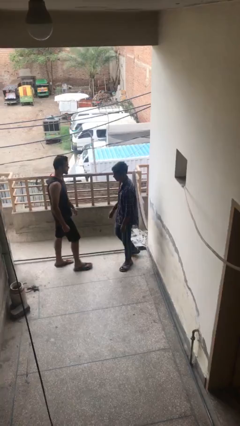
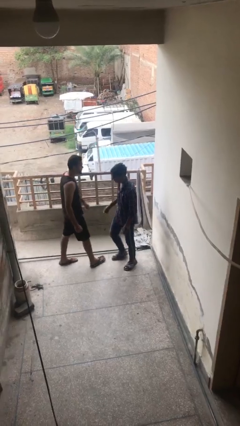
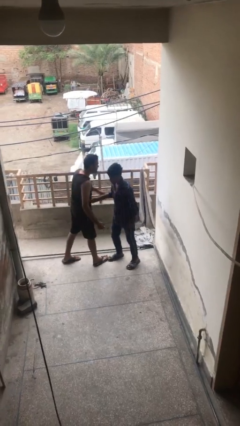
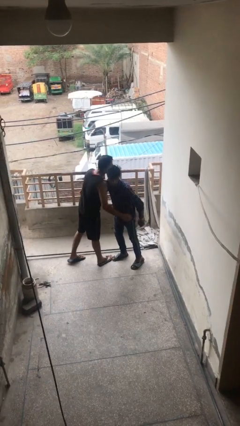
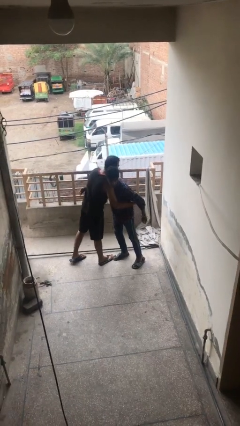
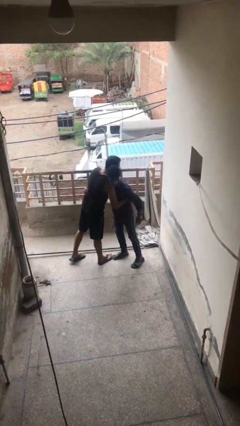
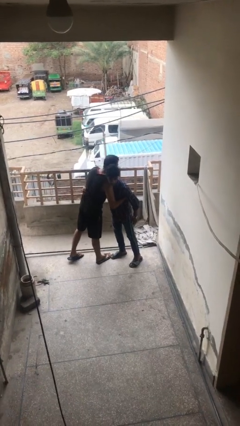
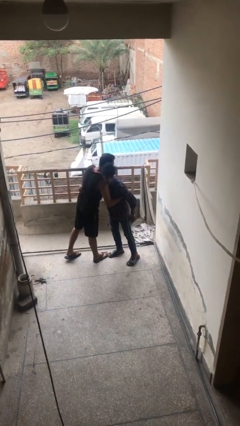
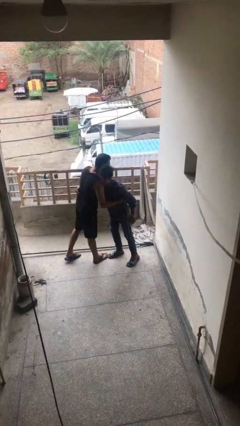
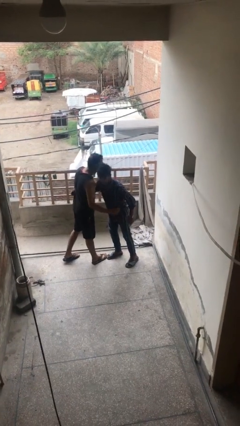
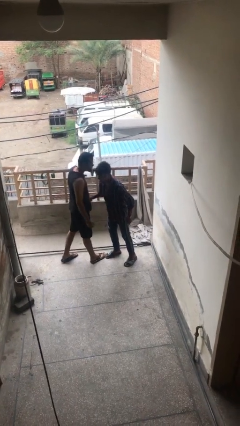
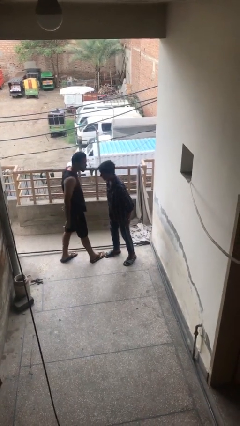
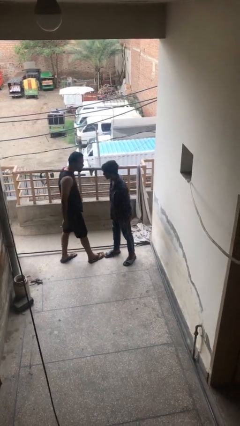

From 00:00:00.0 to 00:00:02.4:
person embraces person

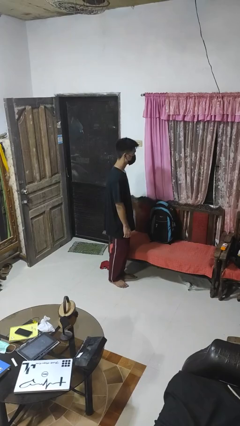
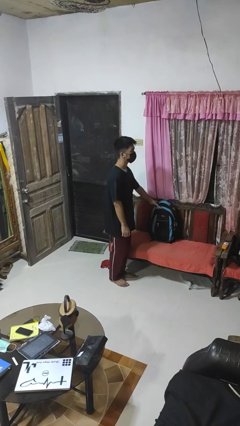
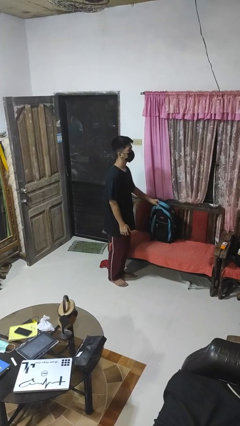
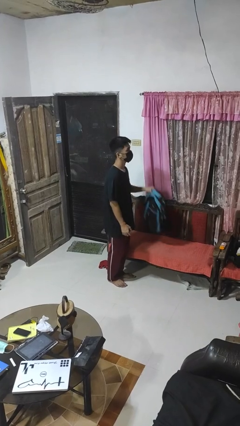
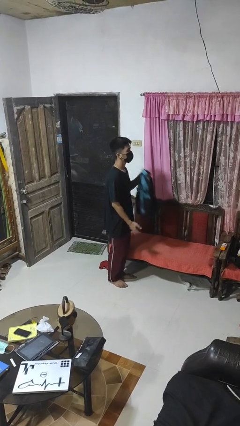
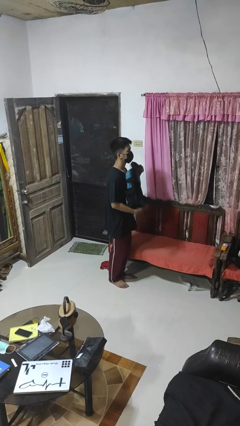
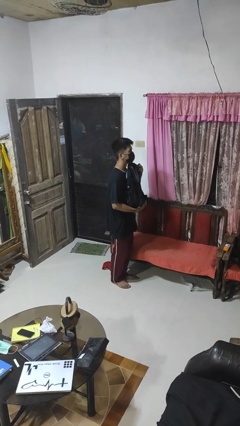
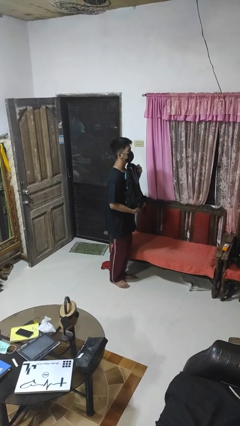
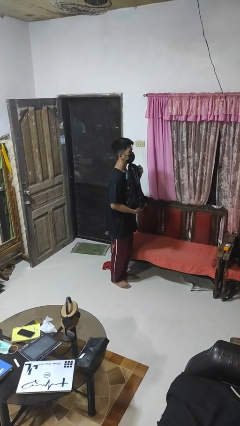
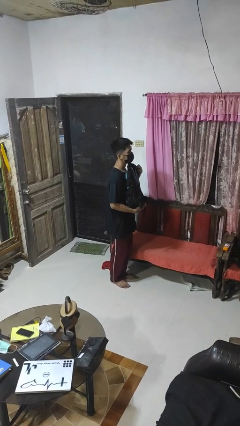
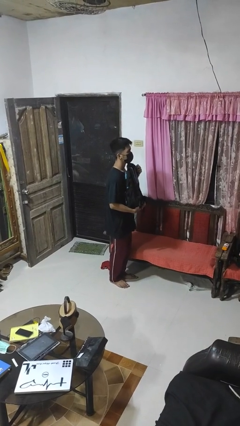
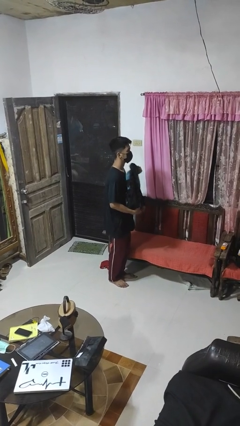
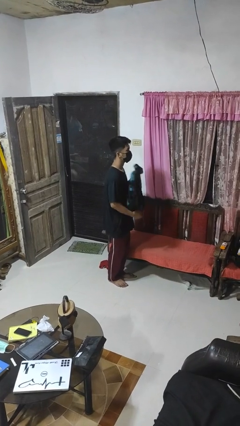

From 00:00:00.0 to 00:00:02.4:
person picks up object from couch

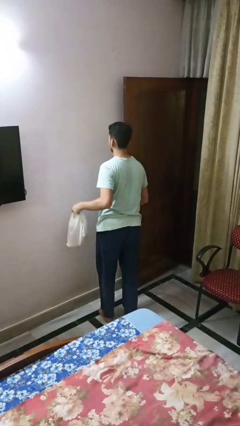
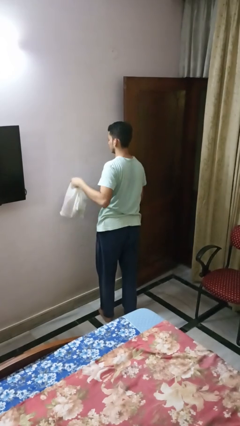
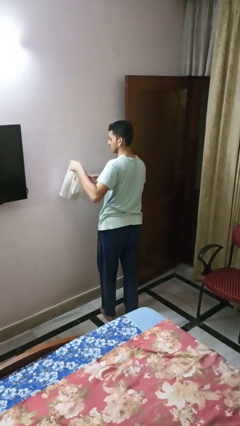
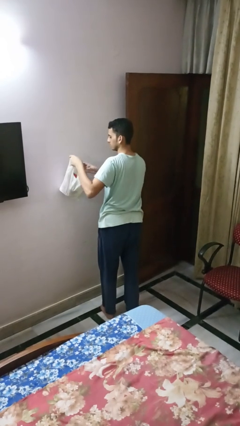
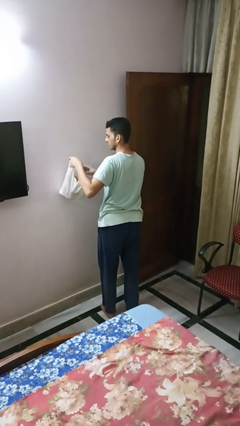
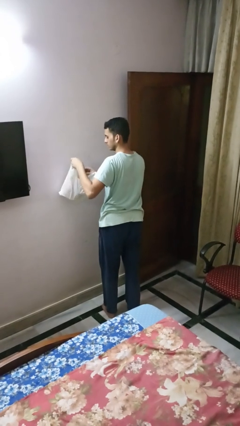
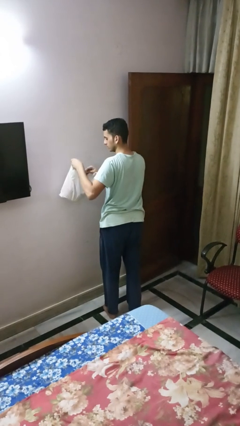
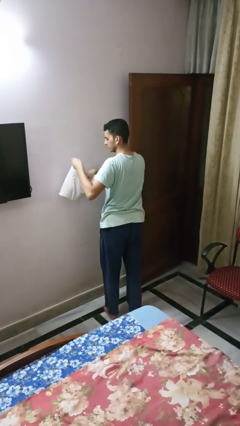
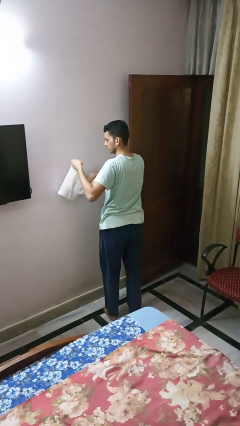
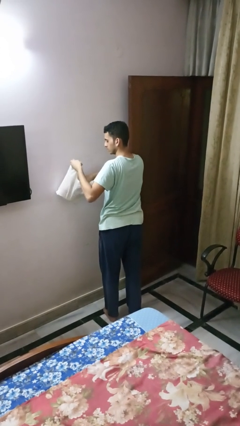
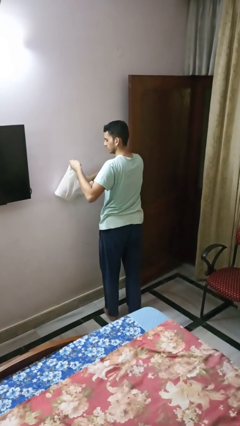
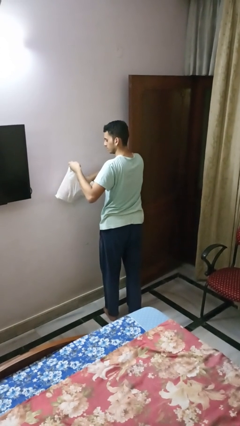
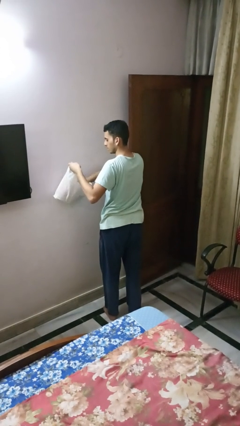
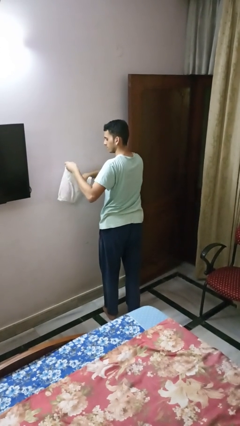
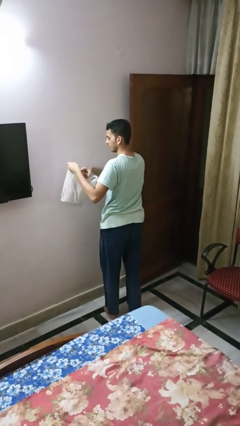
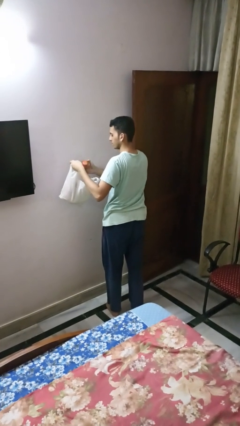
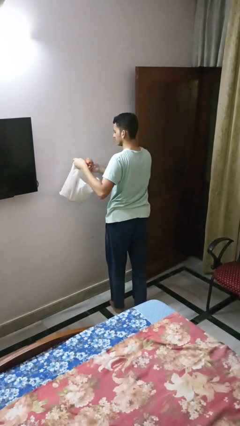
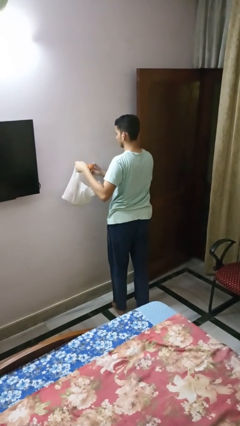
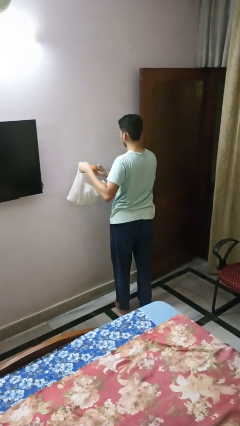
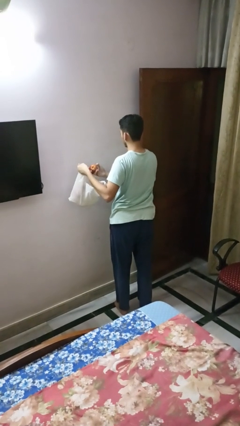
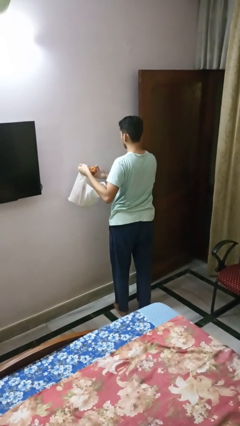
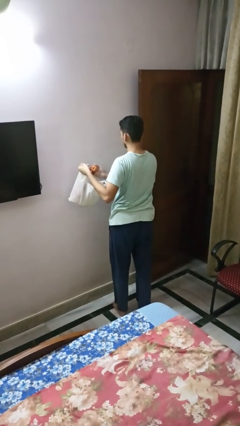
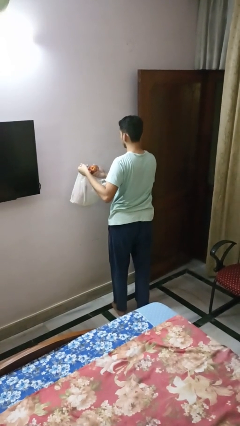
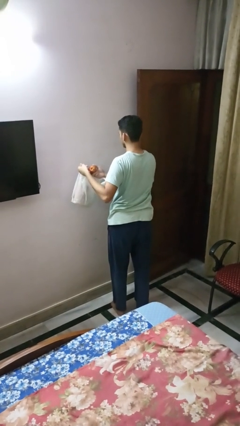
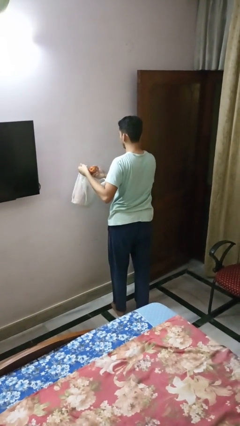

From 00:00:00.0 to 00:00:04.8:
person takes object from bag

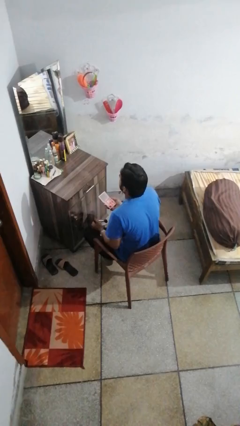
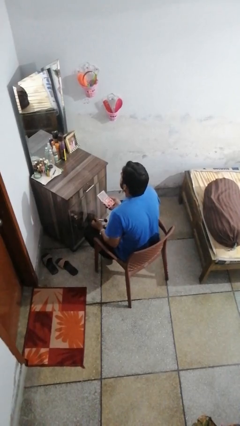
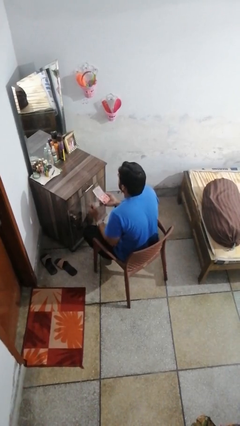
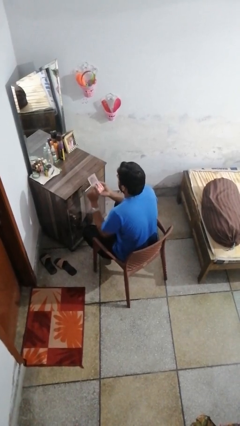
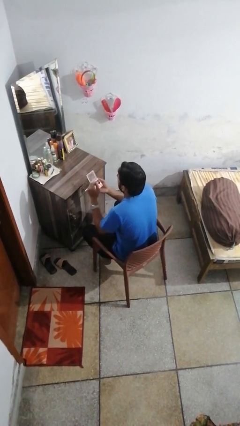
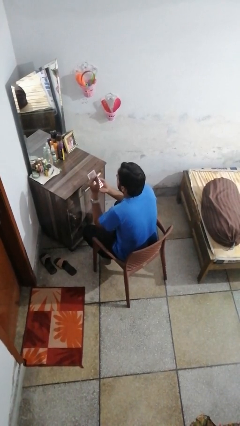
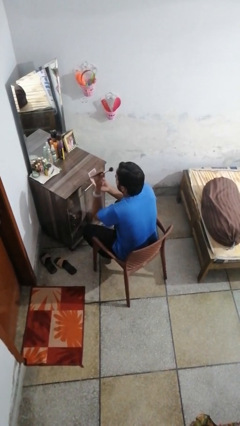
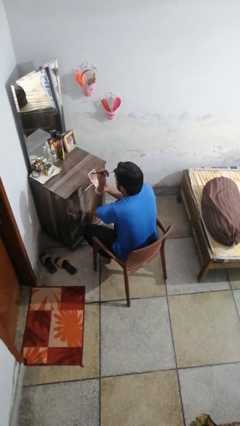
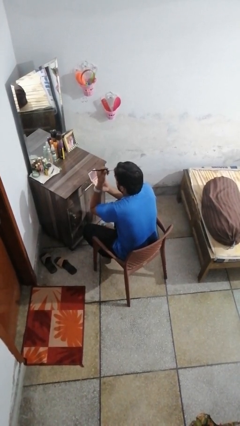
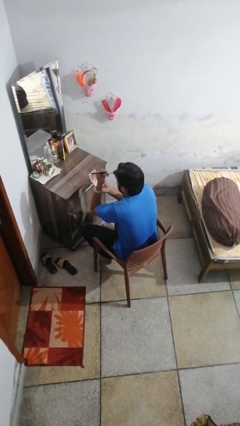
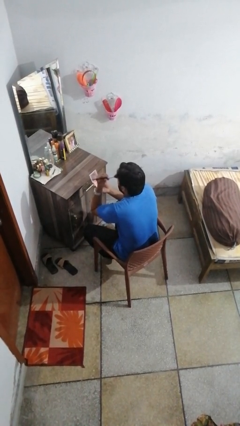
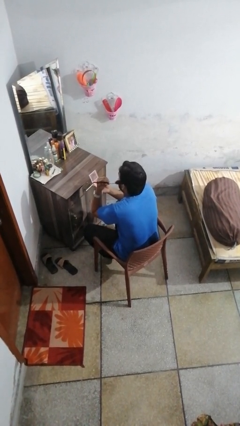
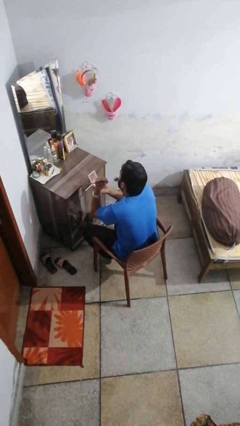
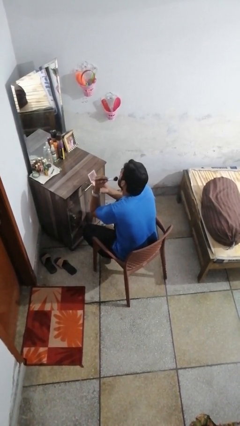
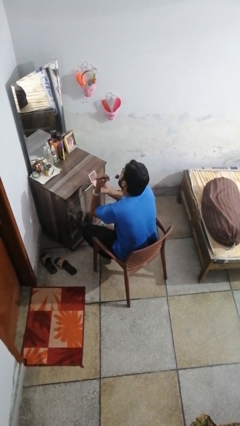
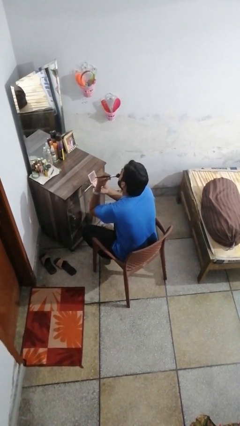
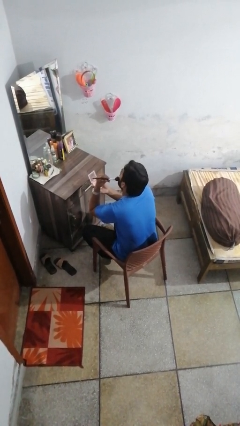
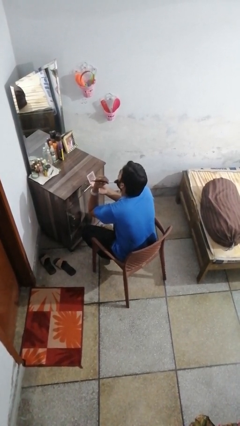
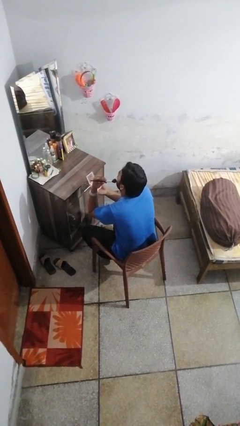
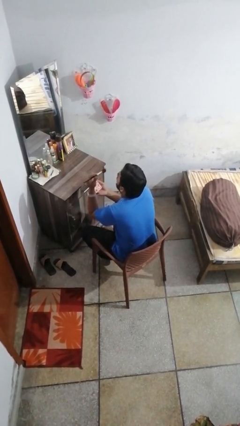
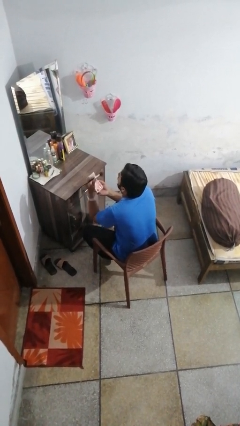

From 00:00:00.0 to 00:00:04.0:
person applies foundation makeup

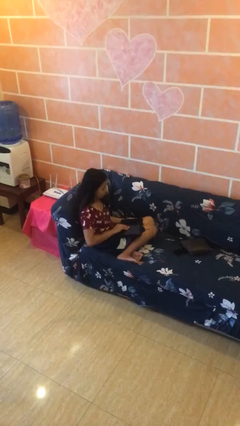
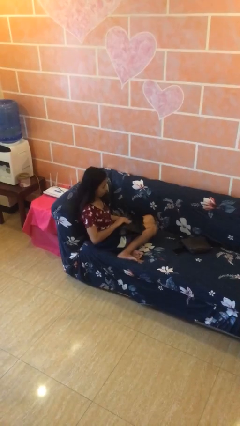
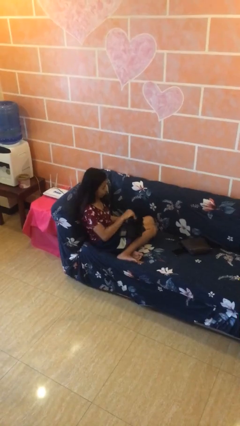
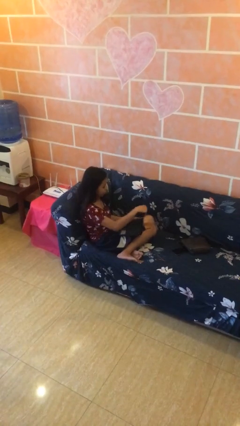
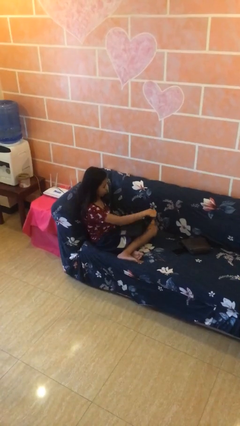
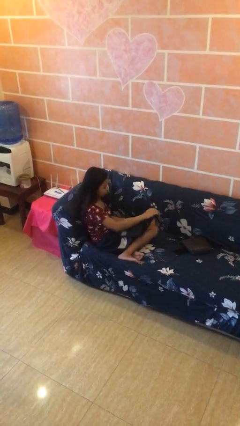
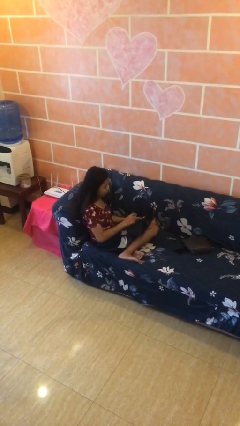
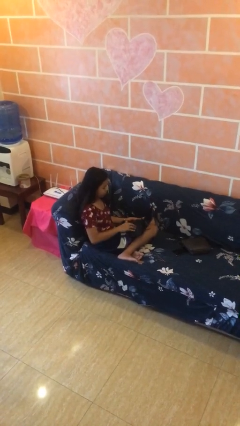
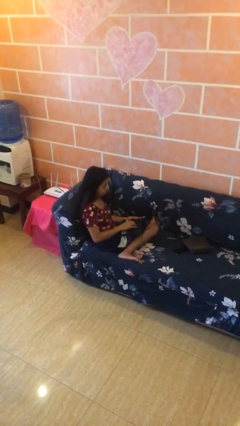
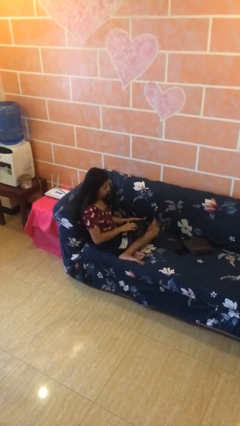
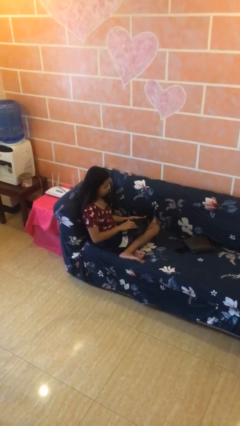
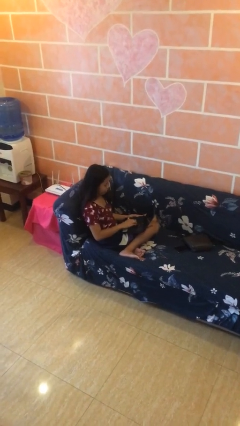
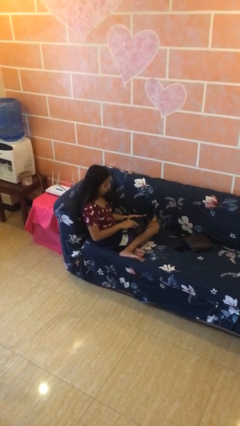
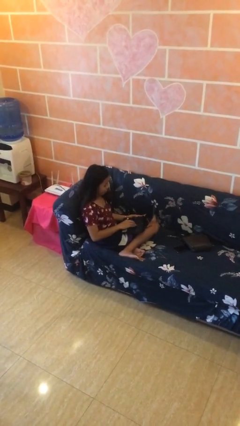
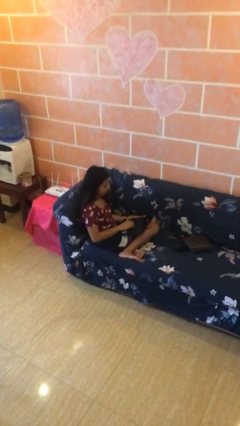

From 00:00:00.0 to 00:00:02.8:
person interacts with laptop

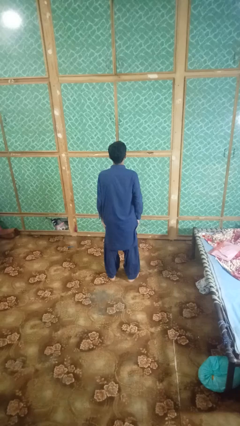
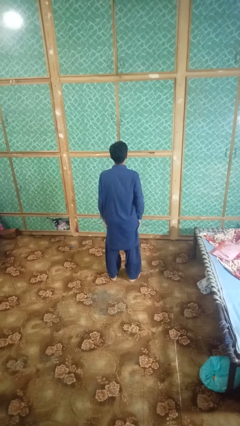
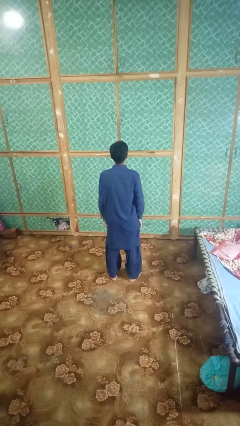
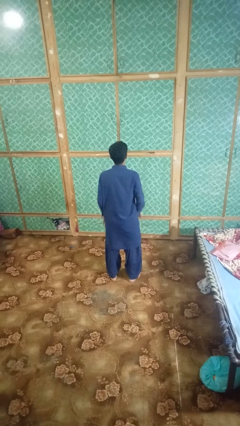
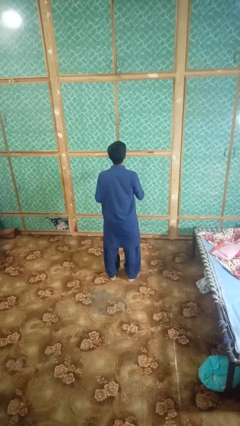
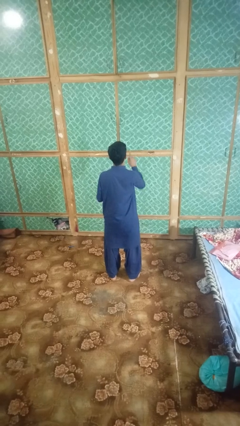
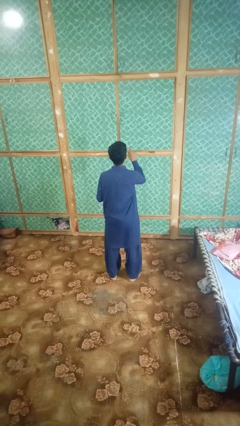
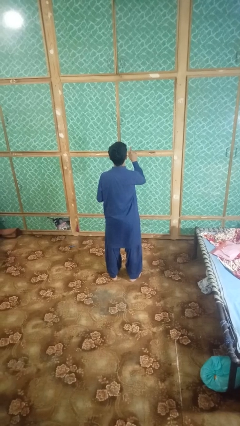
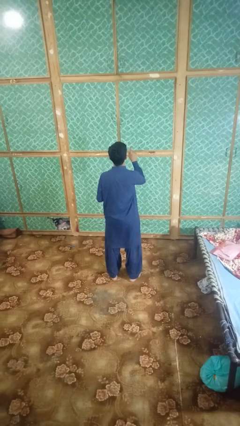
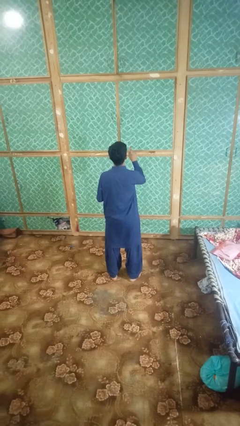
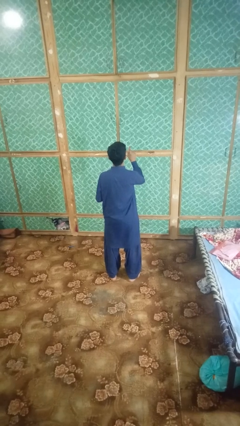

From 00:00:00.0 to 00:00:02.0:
person gestures number one
